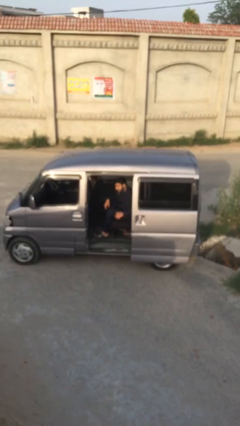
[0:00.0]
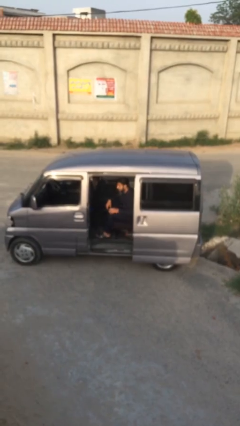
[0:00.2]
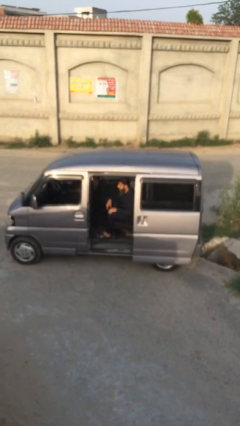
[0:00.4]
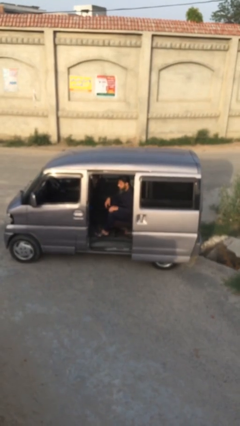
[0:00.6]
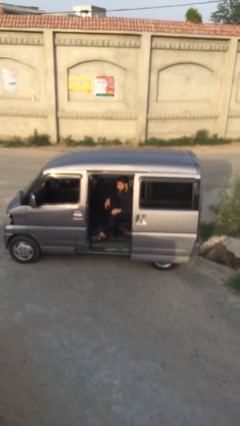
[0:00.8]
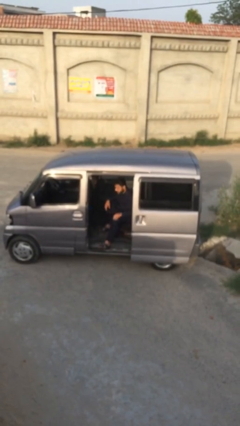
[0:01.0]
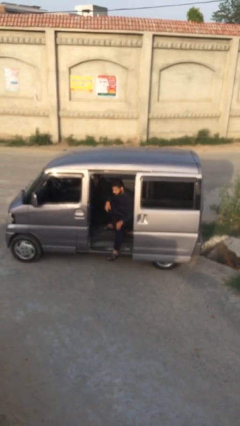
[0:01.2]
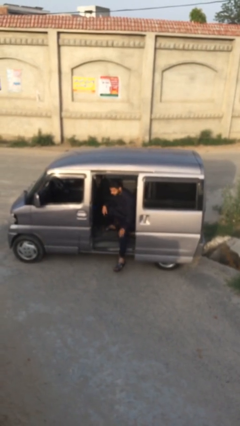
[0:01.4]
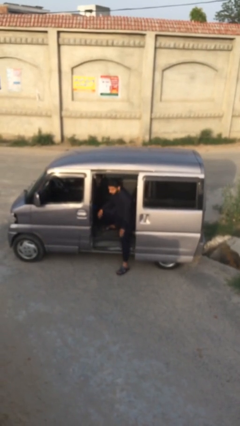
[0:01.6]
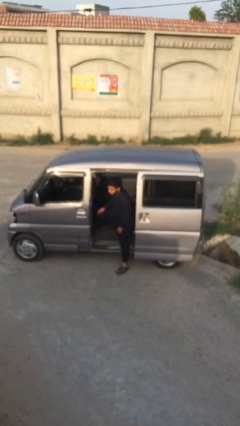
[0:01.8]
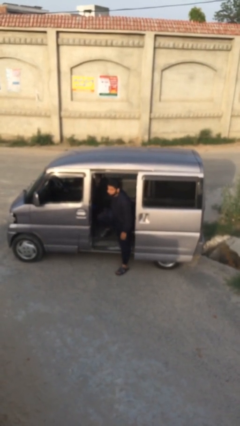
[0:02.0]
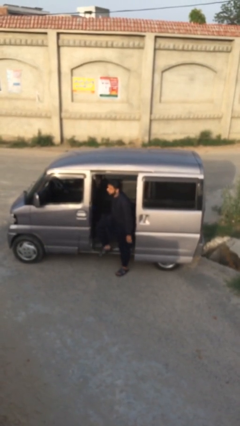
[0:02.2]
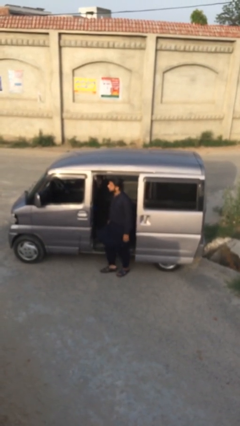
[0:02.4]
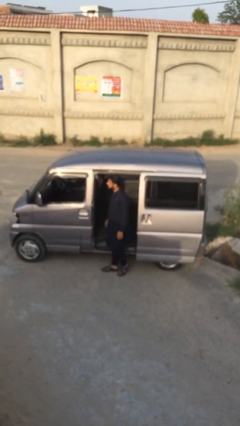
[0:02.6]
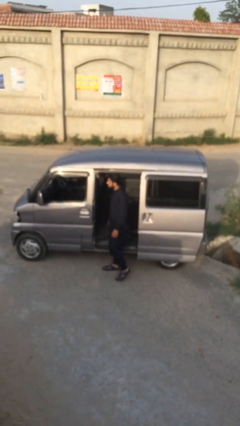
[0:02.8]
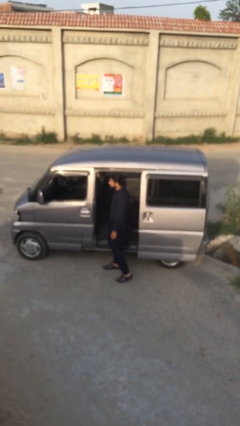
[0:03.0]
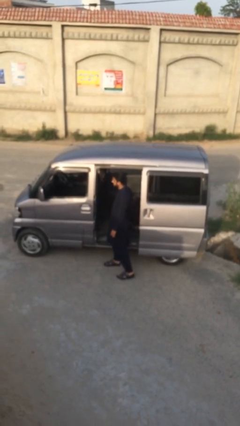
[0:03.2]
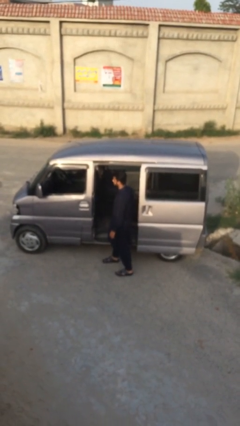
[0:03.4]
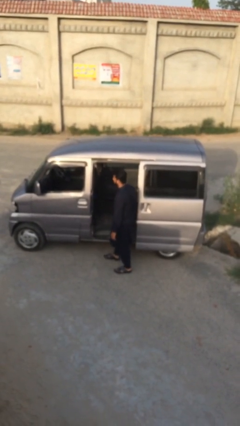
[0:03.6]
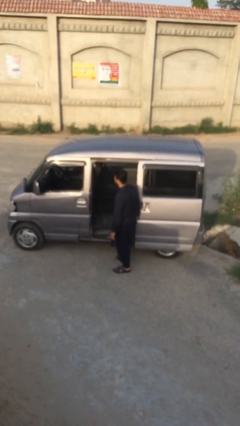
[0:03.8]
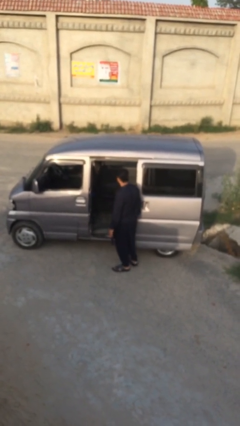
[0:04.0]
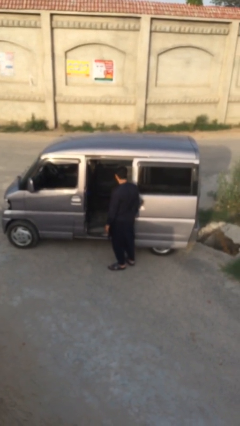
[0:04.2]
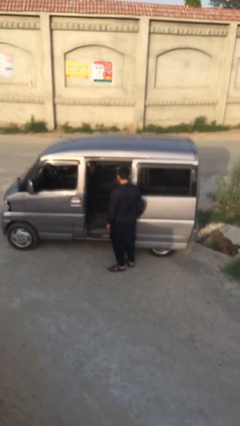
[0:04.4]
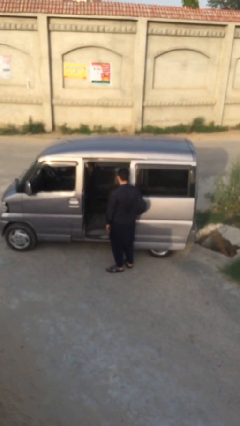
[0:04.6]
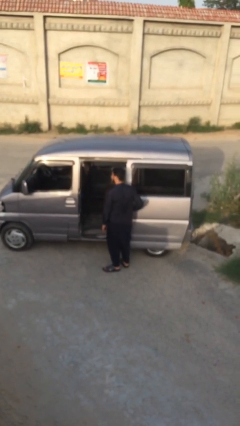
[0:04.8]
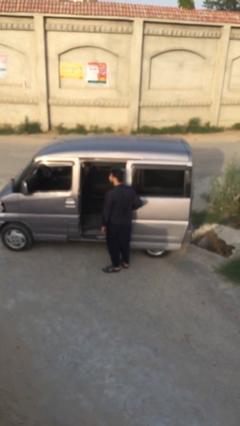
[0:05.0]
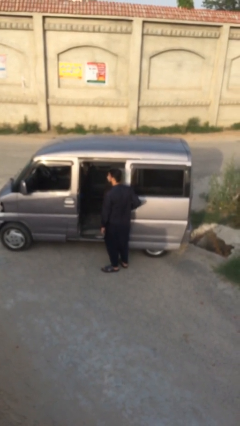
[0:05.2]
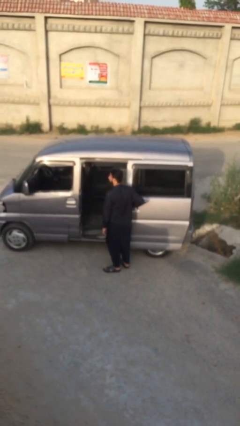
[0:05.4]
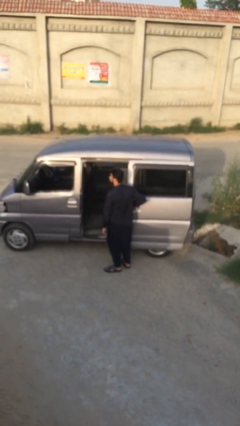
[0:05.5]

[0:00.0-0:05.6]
person exits car

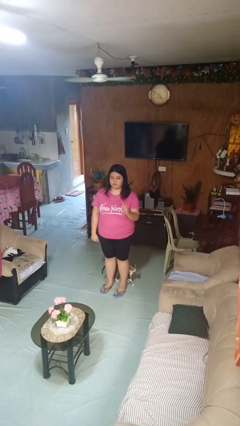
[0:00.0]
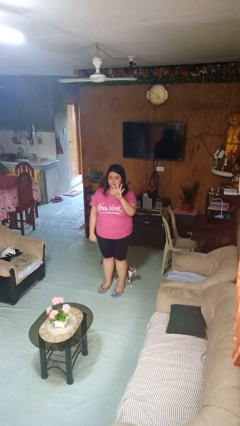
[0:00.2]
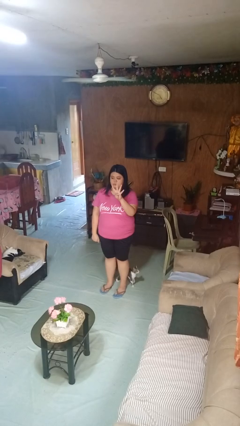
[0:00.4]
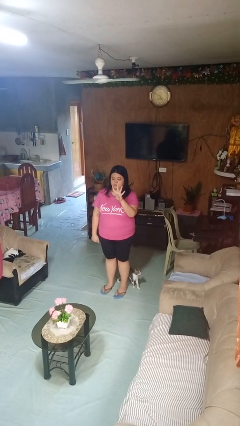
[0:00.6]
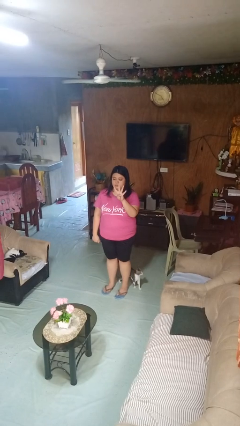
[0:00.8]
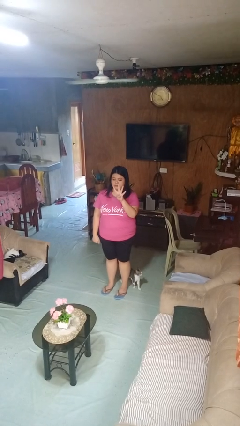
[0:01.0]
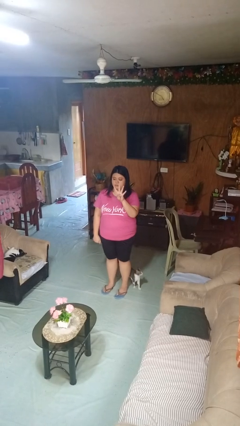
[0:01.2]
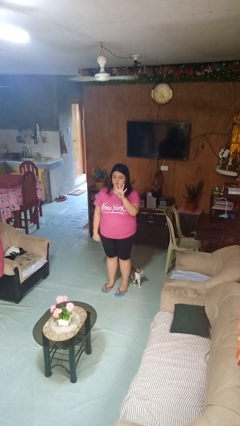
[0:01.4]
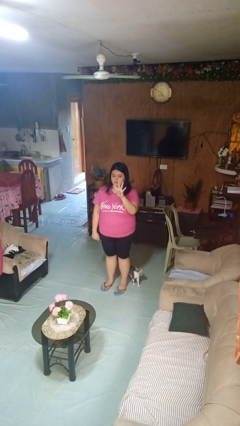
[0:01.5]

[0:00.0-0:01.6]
person gestures number four

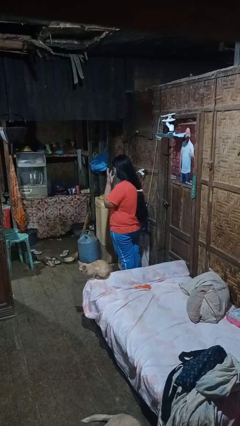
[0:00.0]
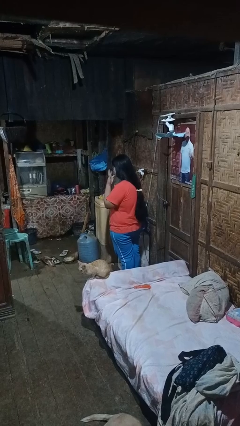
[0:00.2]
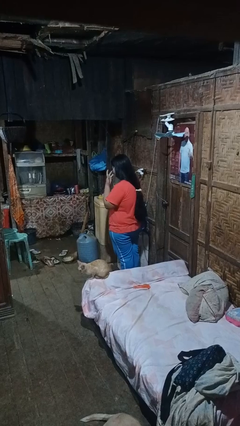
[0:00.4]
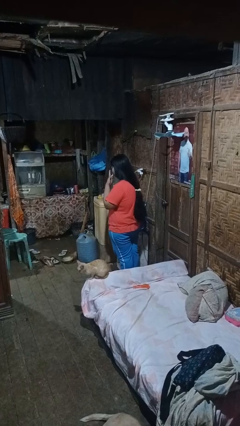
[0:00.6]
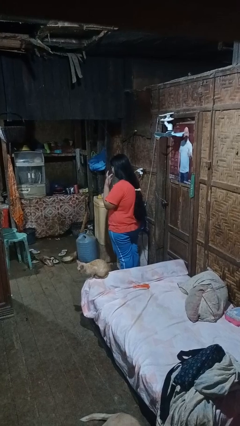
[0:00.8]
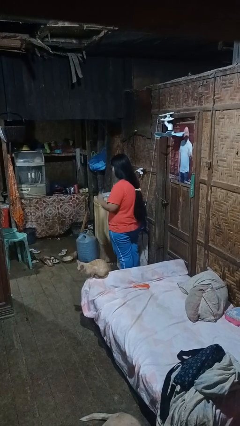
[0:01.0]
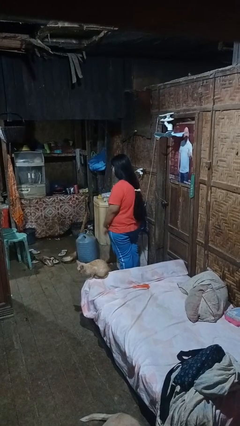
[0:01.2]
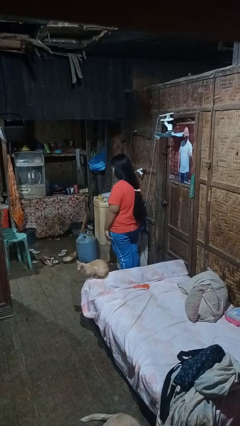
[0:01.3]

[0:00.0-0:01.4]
person licks fingers

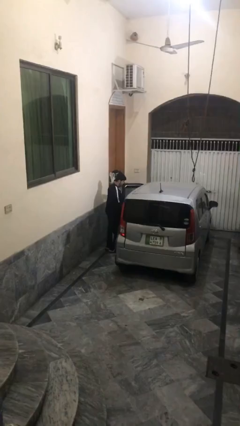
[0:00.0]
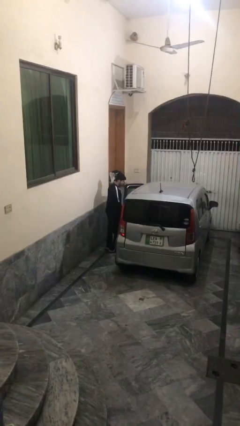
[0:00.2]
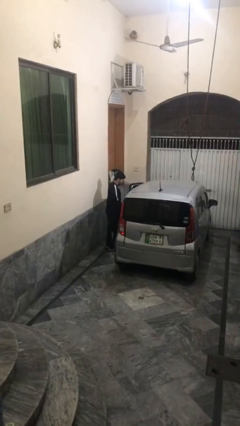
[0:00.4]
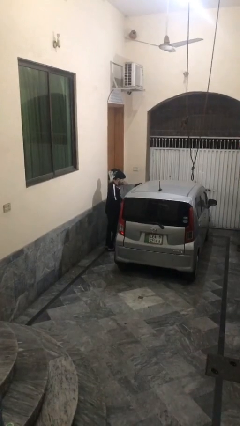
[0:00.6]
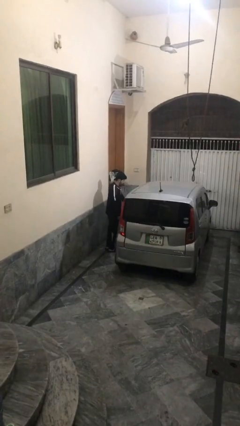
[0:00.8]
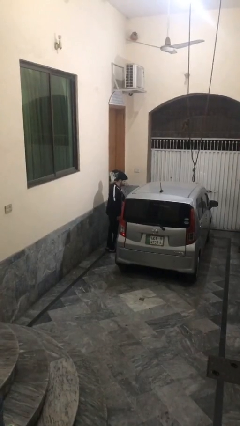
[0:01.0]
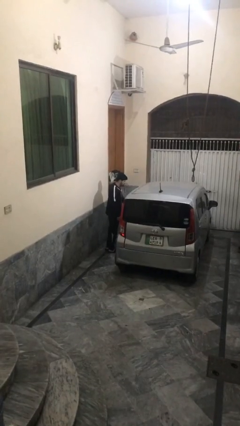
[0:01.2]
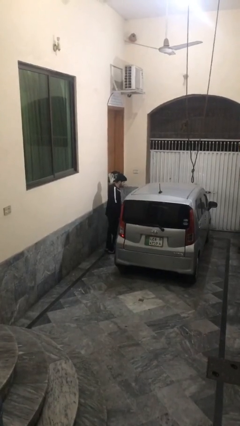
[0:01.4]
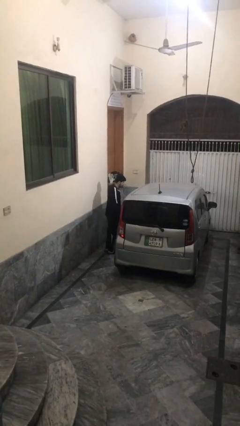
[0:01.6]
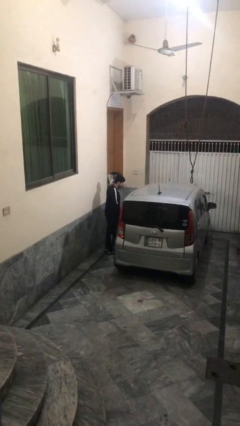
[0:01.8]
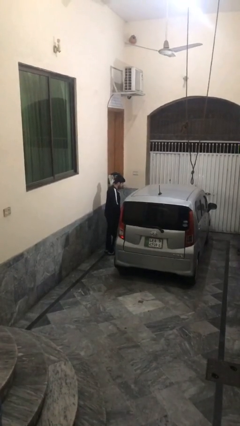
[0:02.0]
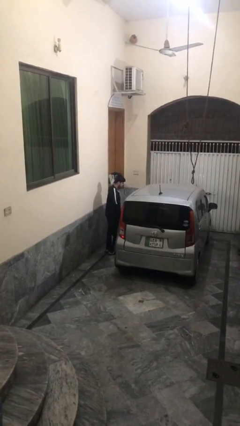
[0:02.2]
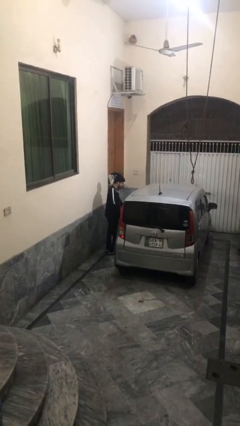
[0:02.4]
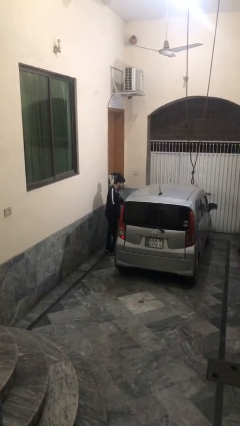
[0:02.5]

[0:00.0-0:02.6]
person closes car door

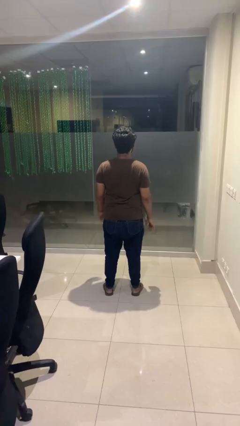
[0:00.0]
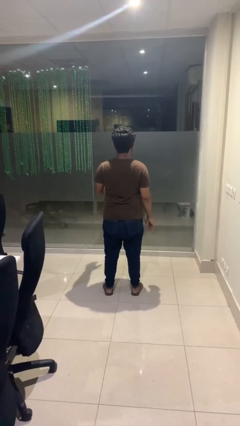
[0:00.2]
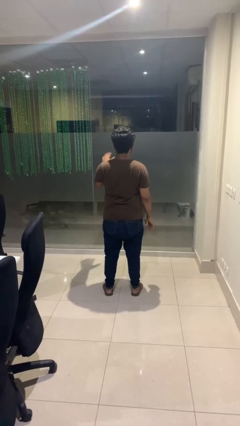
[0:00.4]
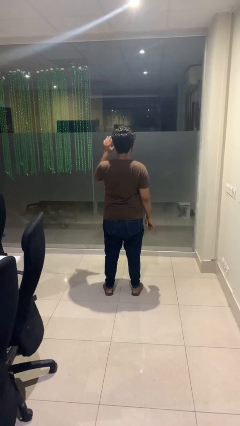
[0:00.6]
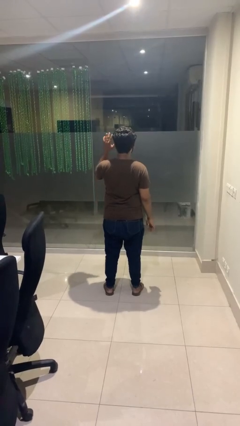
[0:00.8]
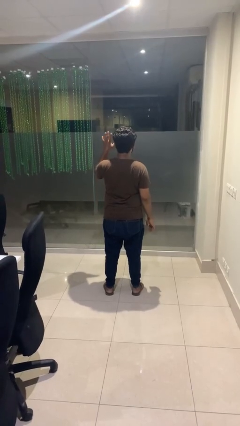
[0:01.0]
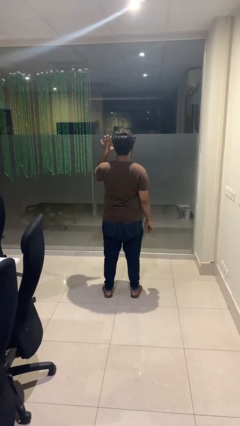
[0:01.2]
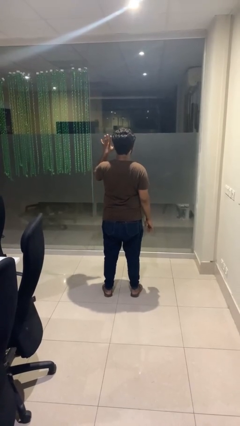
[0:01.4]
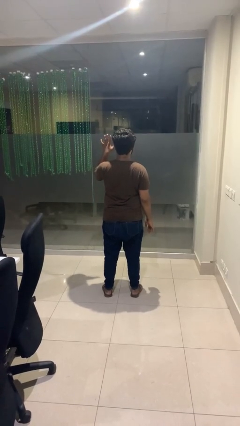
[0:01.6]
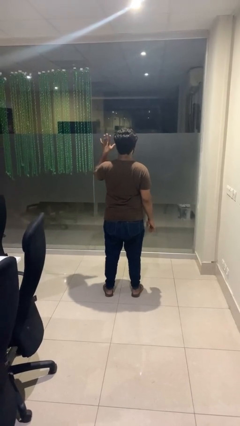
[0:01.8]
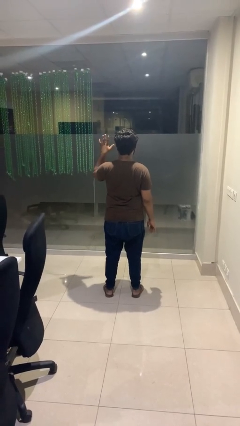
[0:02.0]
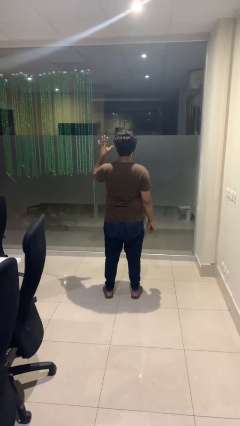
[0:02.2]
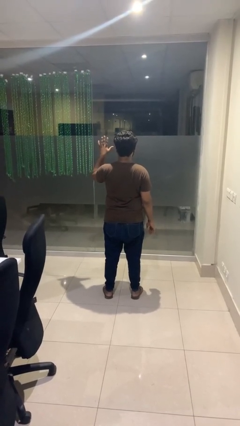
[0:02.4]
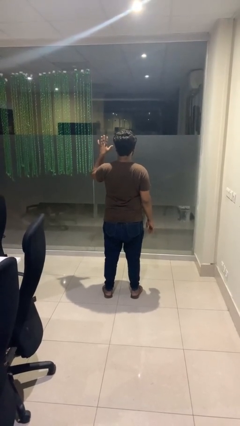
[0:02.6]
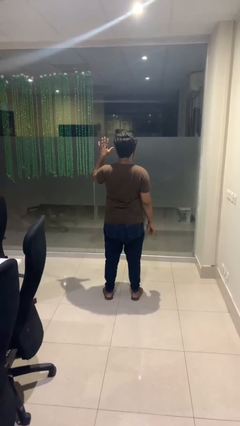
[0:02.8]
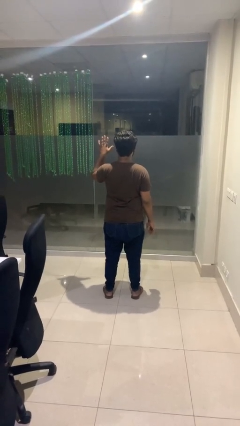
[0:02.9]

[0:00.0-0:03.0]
person gestures number five

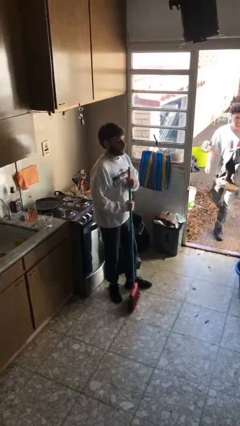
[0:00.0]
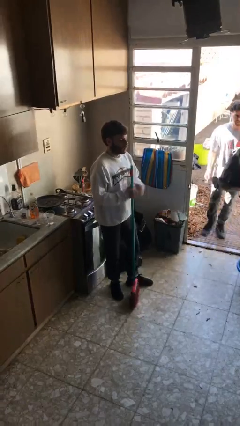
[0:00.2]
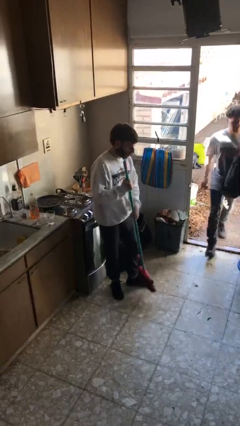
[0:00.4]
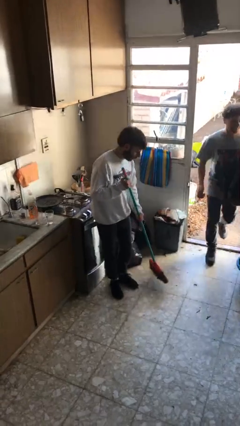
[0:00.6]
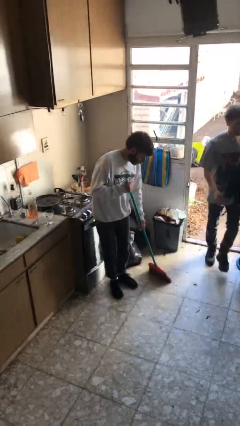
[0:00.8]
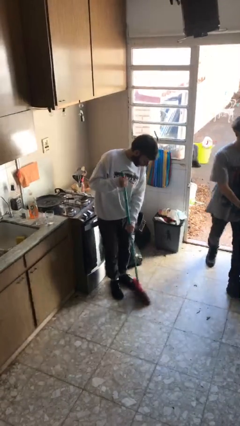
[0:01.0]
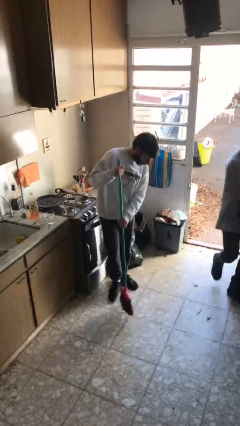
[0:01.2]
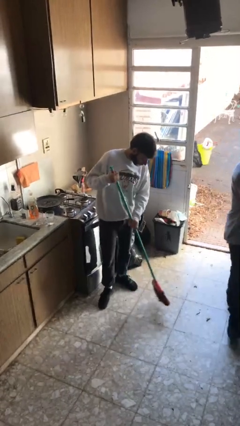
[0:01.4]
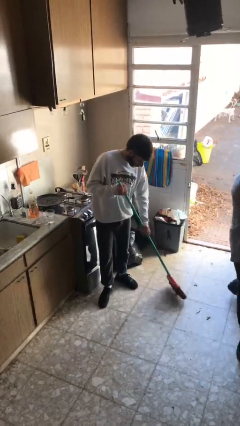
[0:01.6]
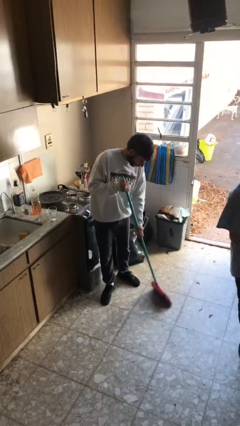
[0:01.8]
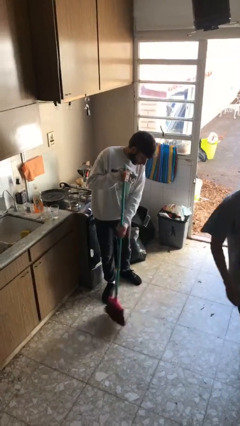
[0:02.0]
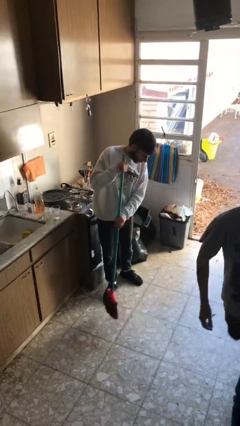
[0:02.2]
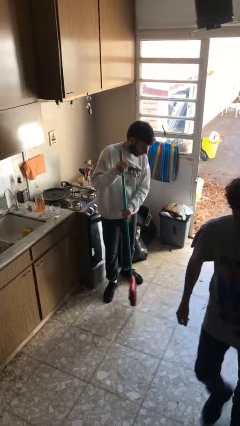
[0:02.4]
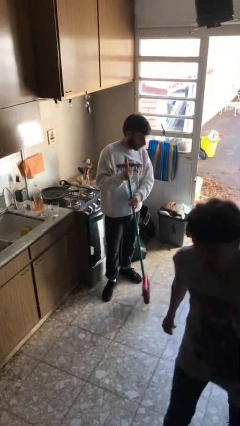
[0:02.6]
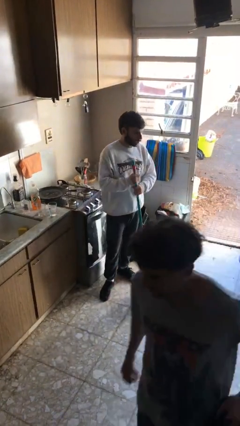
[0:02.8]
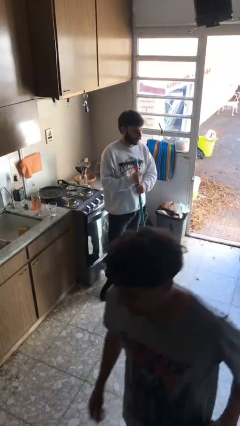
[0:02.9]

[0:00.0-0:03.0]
person sweeps floor

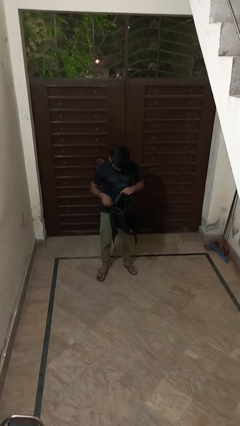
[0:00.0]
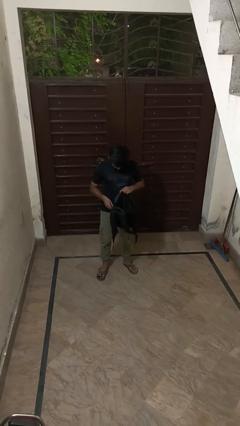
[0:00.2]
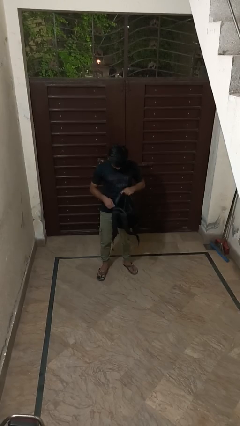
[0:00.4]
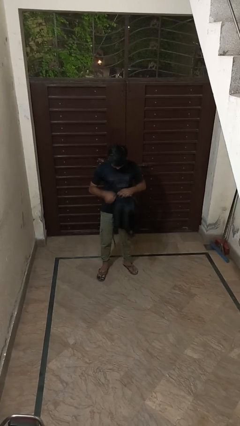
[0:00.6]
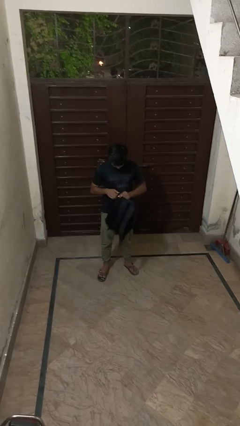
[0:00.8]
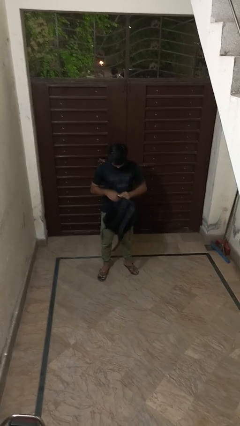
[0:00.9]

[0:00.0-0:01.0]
person puts object into backpack
